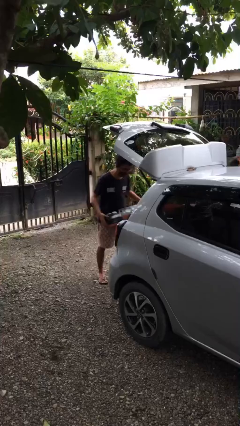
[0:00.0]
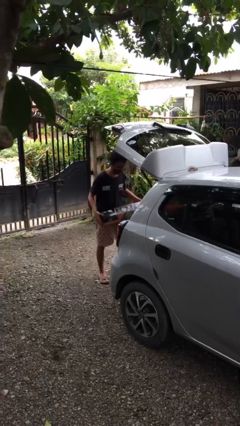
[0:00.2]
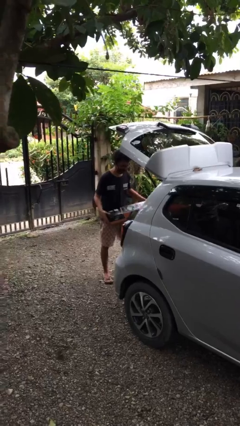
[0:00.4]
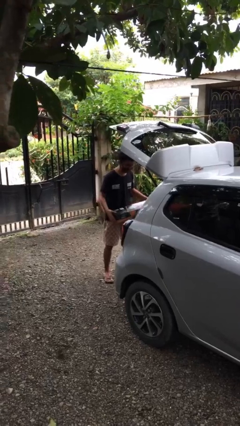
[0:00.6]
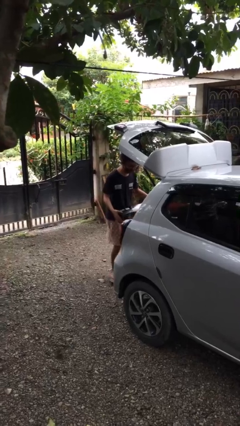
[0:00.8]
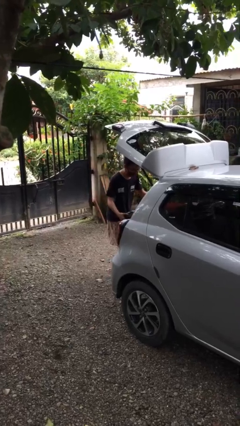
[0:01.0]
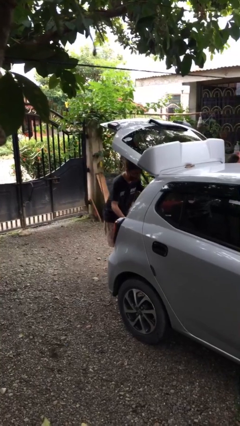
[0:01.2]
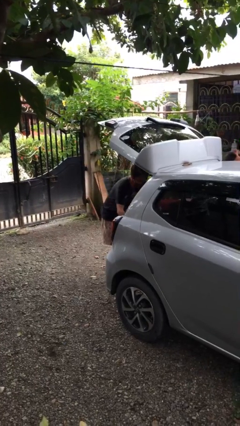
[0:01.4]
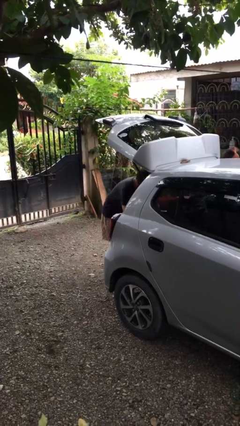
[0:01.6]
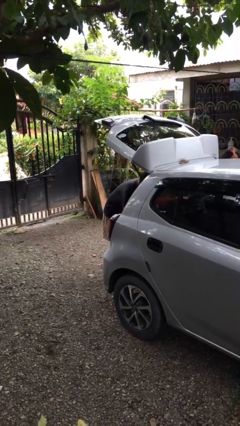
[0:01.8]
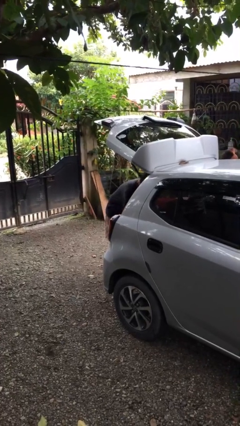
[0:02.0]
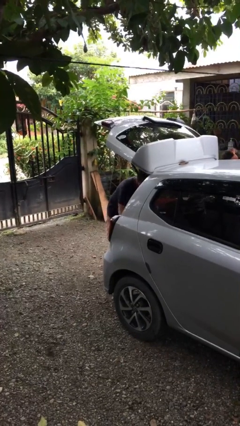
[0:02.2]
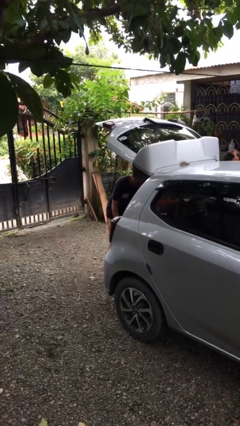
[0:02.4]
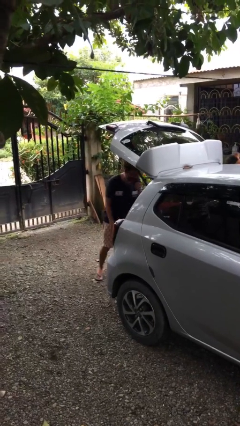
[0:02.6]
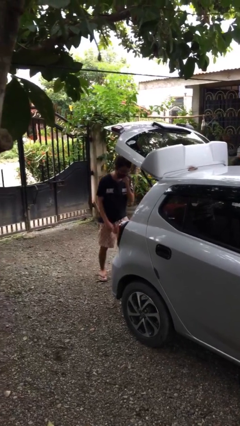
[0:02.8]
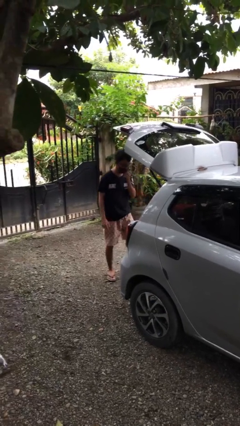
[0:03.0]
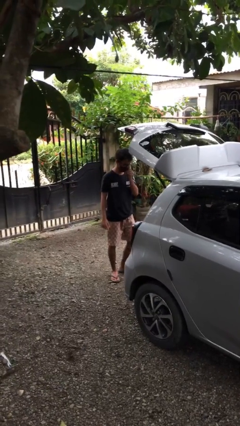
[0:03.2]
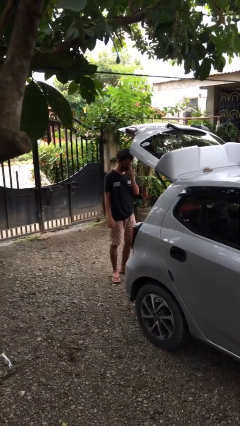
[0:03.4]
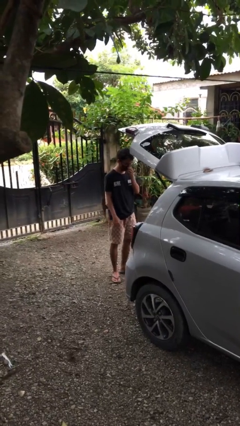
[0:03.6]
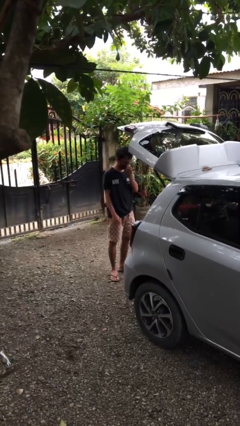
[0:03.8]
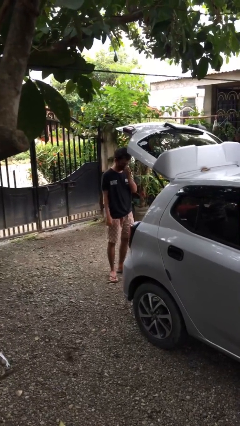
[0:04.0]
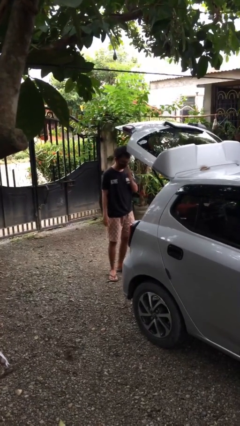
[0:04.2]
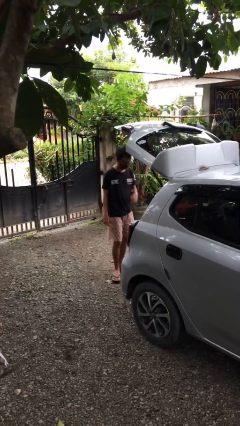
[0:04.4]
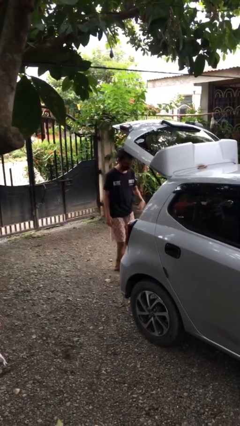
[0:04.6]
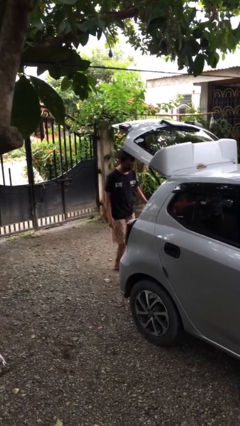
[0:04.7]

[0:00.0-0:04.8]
person loads car

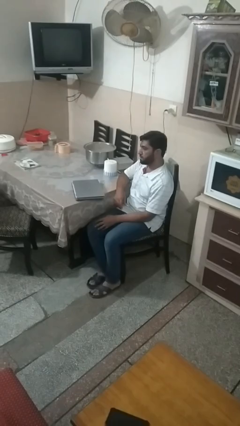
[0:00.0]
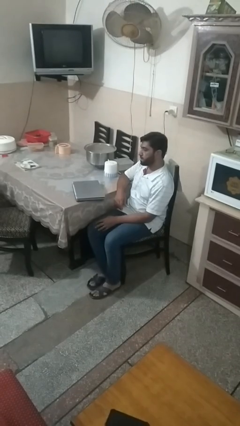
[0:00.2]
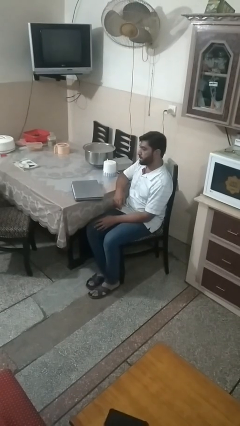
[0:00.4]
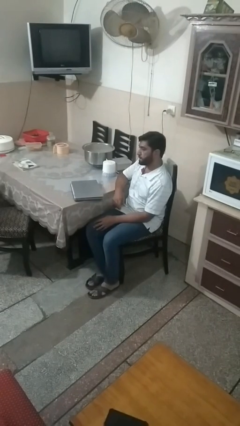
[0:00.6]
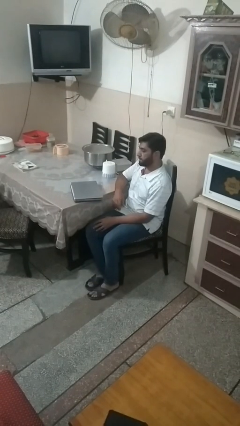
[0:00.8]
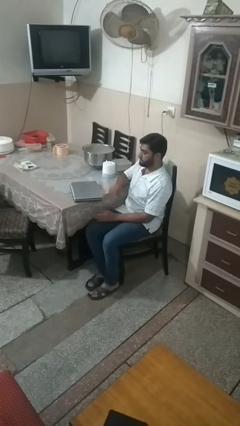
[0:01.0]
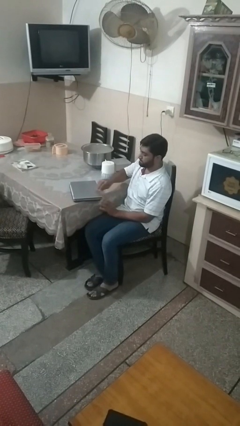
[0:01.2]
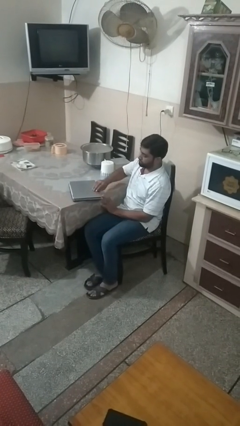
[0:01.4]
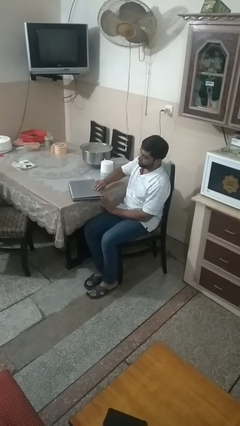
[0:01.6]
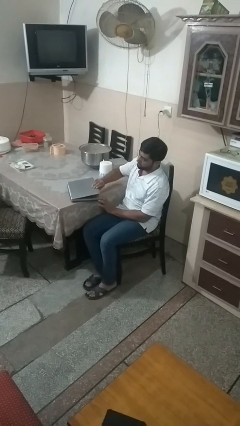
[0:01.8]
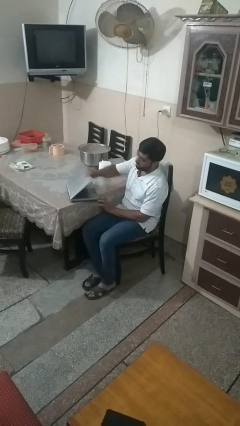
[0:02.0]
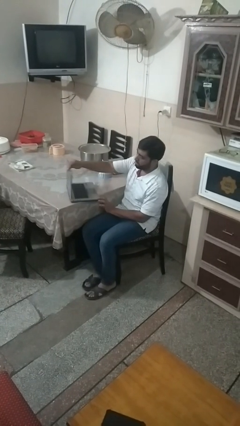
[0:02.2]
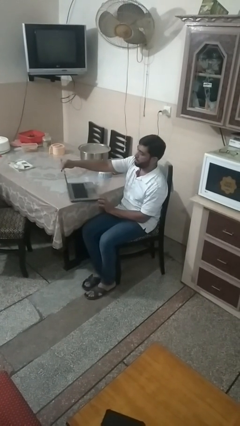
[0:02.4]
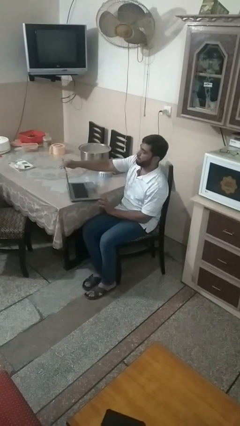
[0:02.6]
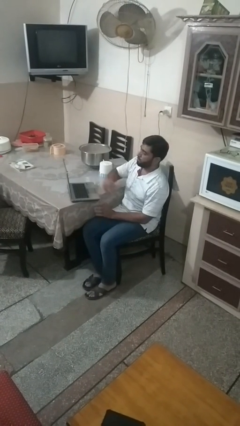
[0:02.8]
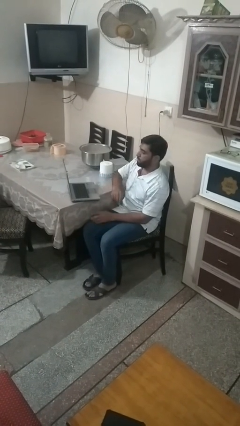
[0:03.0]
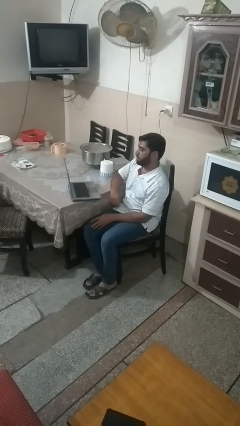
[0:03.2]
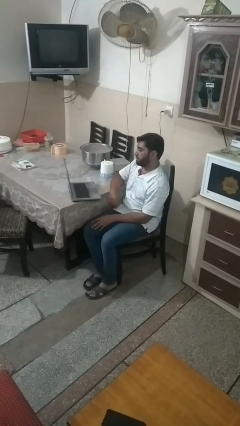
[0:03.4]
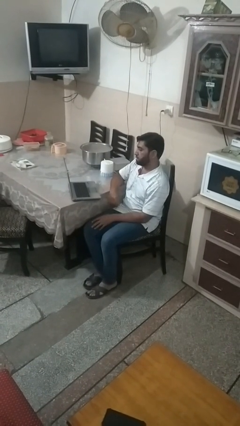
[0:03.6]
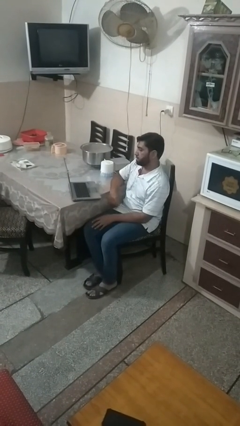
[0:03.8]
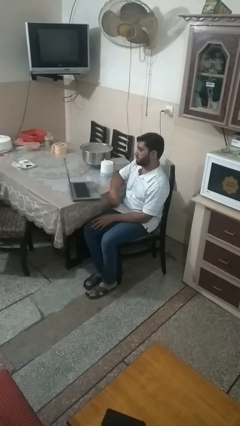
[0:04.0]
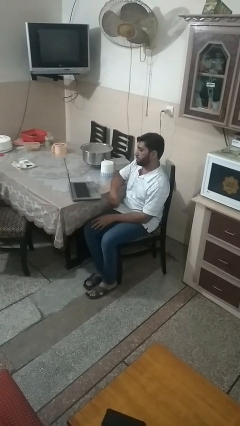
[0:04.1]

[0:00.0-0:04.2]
person opens laptop

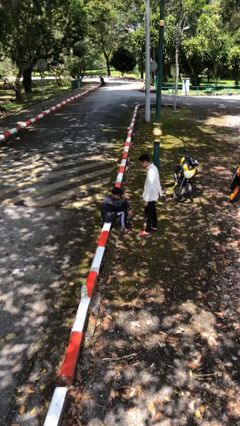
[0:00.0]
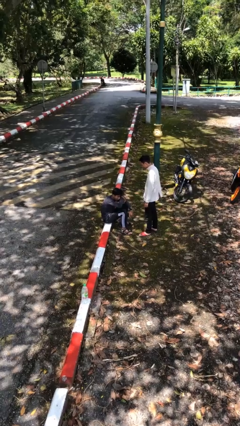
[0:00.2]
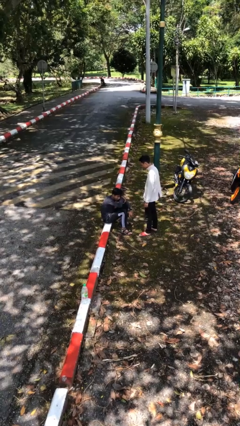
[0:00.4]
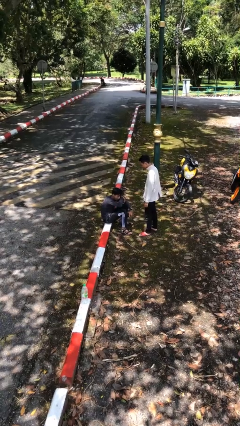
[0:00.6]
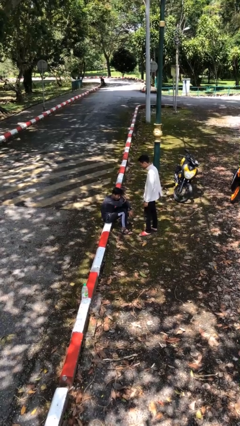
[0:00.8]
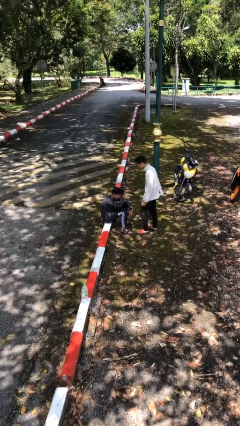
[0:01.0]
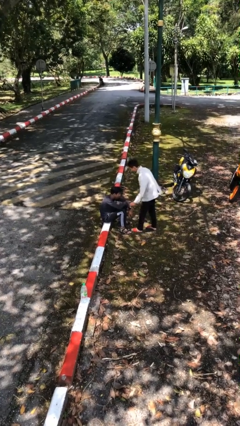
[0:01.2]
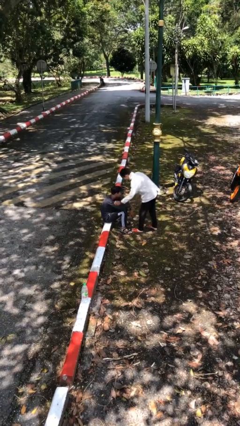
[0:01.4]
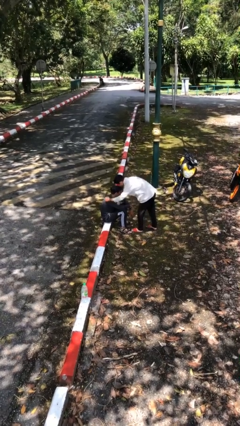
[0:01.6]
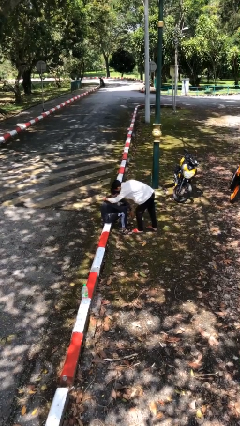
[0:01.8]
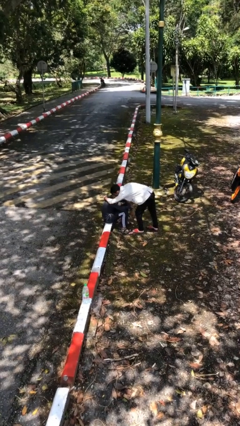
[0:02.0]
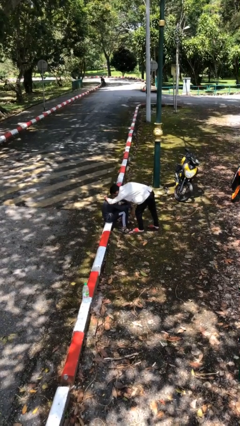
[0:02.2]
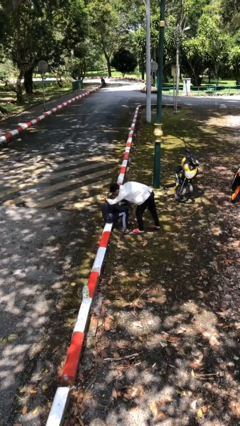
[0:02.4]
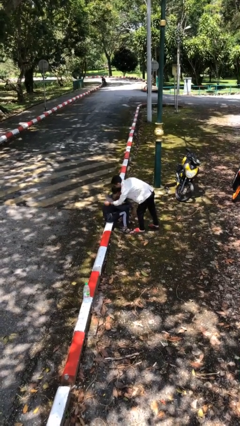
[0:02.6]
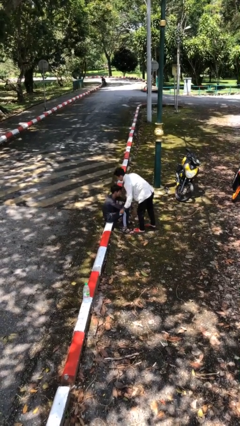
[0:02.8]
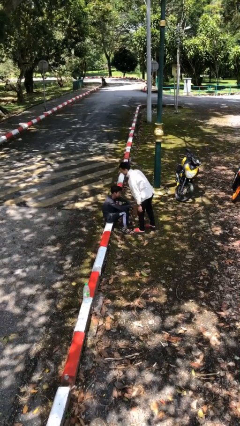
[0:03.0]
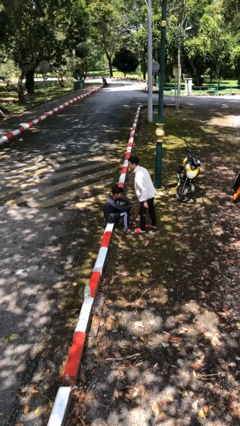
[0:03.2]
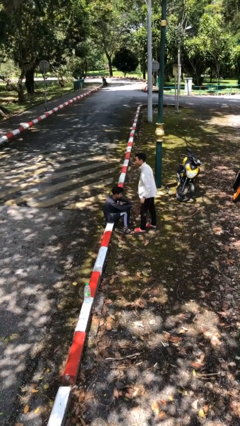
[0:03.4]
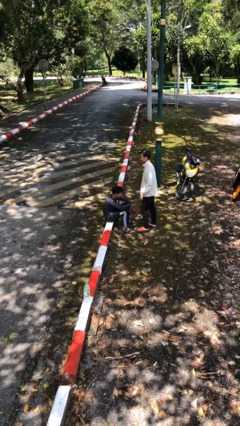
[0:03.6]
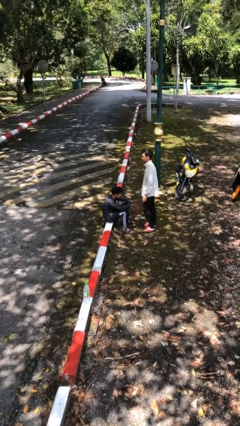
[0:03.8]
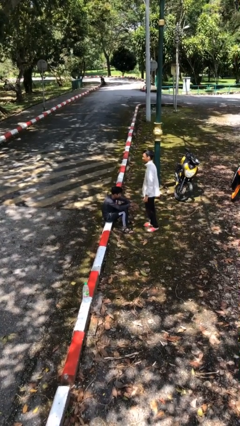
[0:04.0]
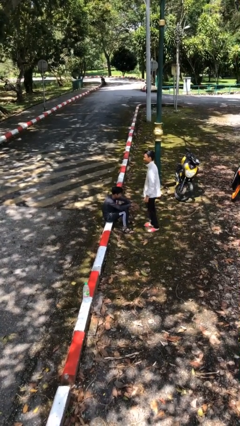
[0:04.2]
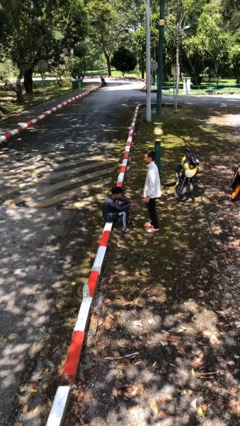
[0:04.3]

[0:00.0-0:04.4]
person embraces person

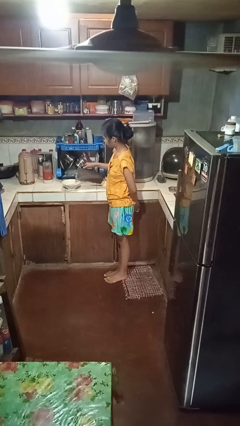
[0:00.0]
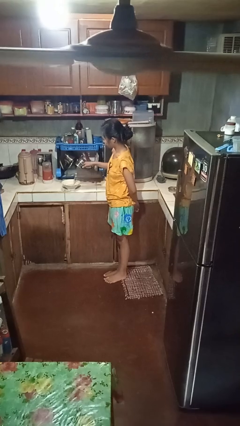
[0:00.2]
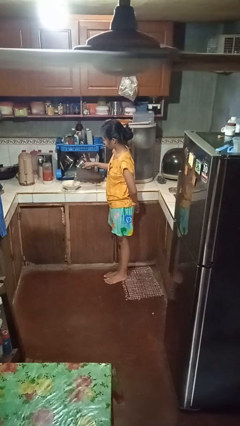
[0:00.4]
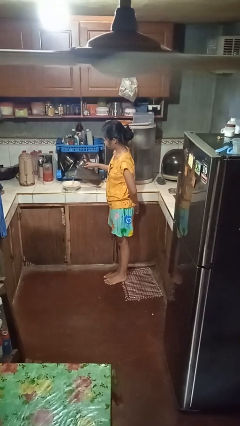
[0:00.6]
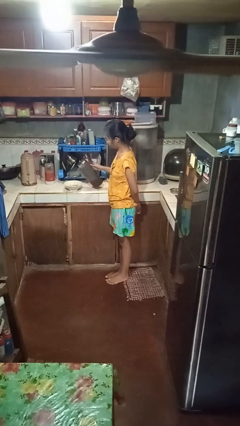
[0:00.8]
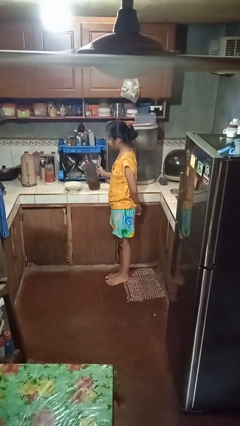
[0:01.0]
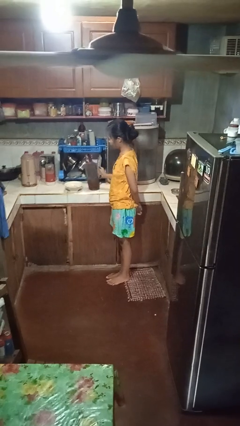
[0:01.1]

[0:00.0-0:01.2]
person pours into bowl

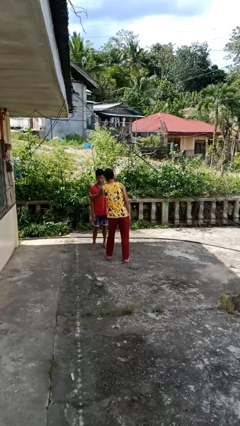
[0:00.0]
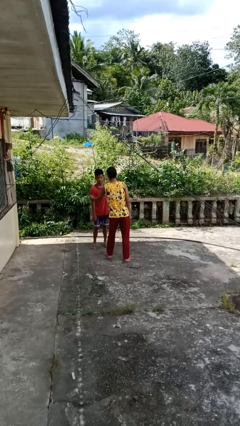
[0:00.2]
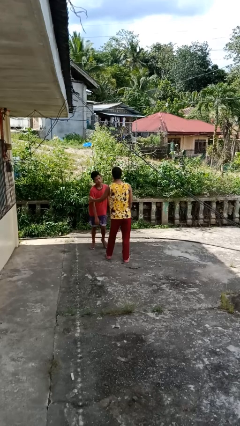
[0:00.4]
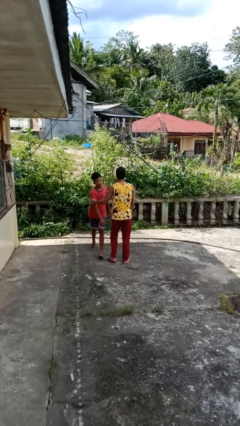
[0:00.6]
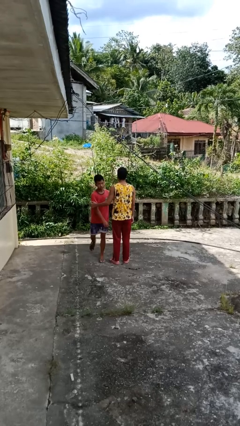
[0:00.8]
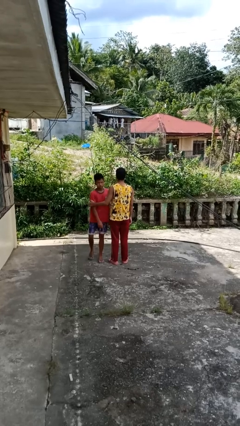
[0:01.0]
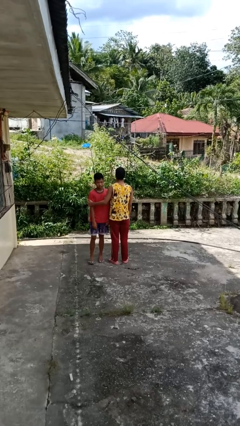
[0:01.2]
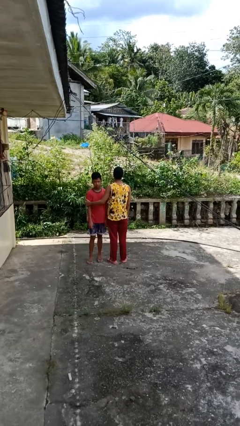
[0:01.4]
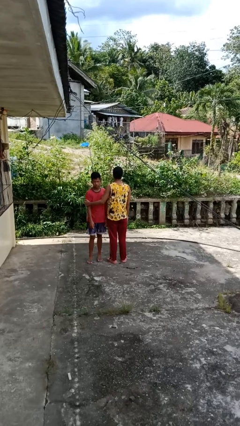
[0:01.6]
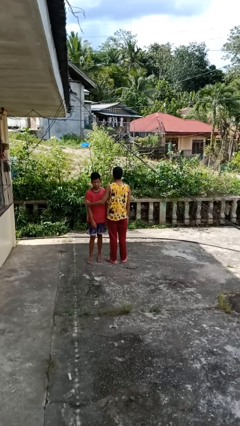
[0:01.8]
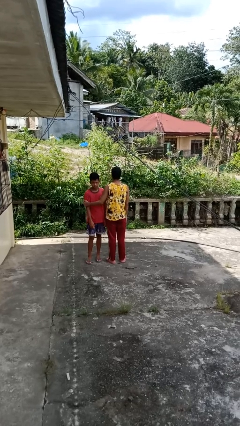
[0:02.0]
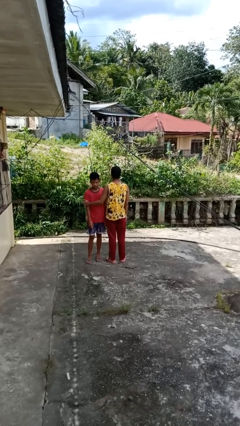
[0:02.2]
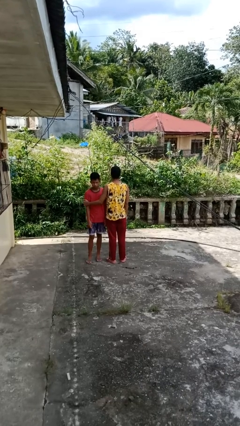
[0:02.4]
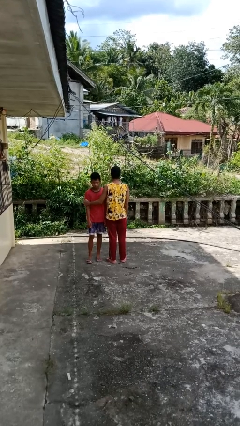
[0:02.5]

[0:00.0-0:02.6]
person grabs person by bicep

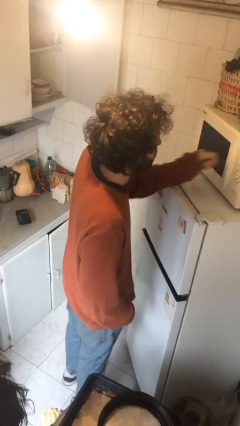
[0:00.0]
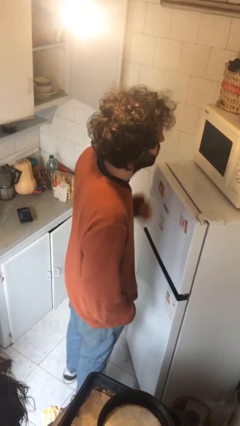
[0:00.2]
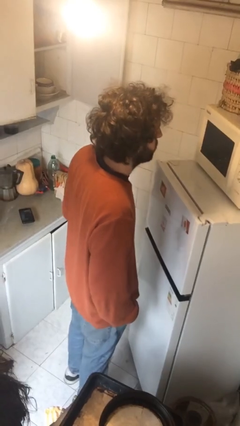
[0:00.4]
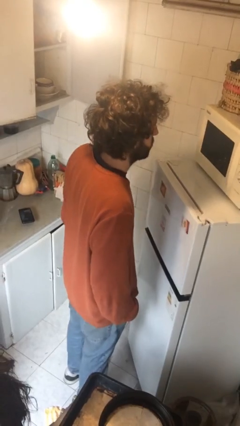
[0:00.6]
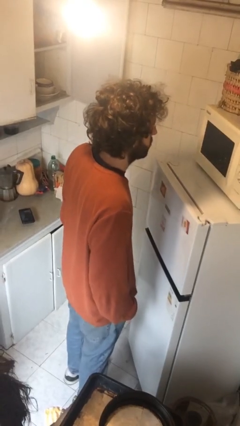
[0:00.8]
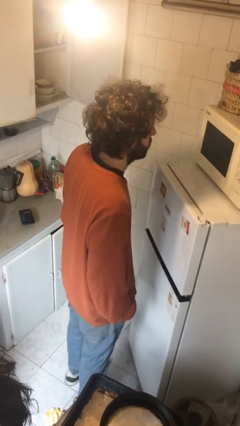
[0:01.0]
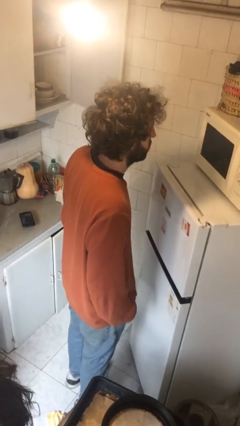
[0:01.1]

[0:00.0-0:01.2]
person closes microwave
